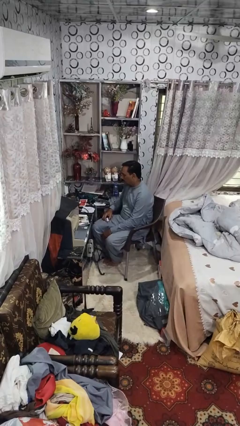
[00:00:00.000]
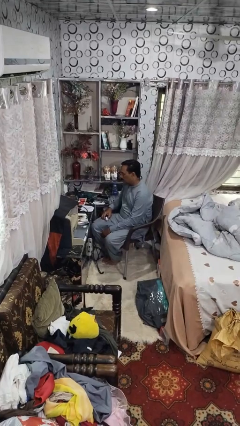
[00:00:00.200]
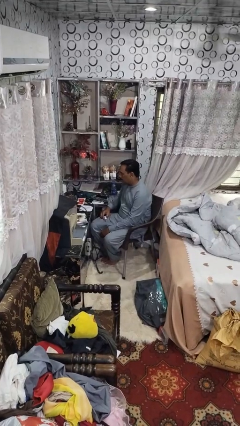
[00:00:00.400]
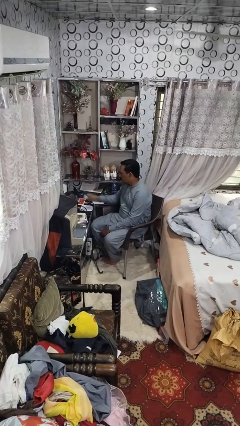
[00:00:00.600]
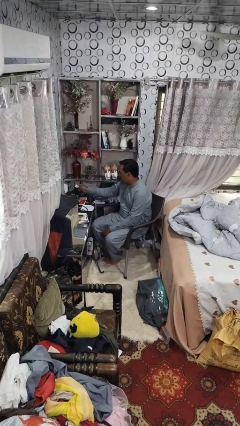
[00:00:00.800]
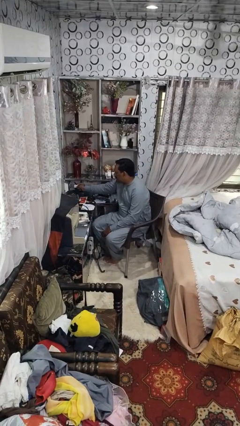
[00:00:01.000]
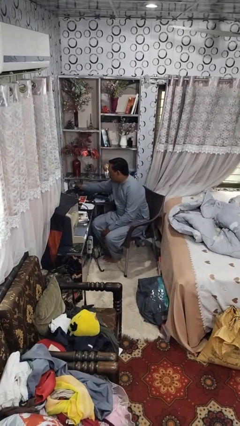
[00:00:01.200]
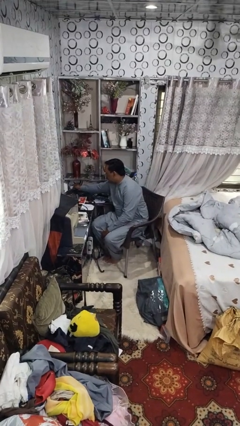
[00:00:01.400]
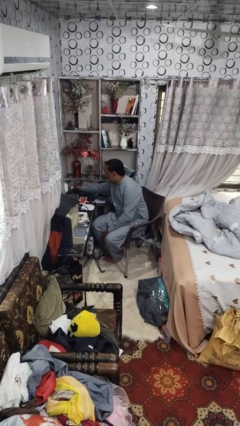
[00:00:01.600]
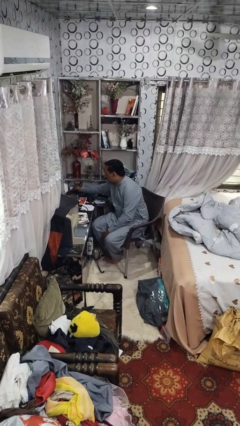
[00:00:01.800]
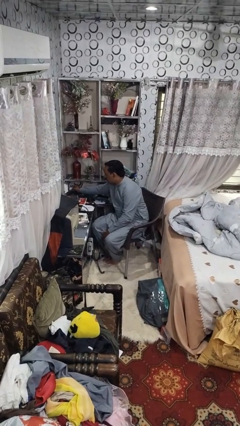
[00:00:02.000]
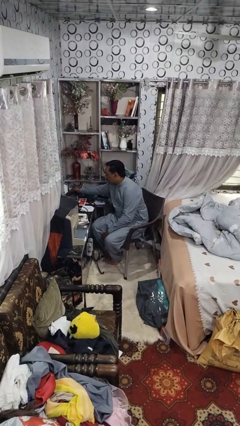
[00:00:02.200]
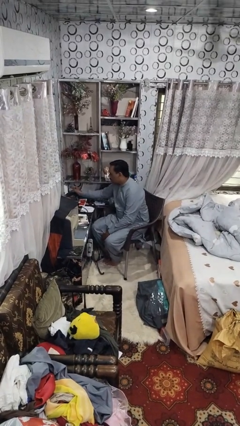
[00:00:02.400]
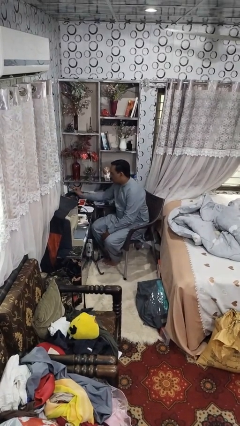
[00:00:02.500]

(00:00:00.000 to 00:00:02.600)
person plugs into electrical socket

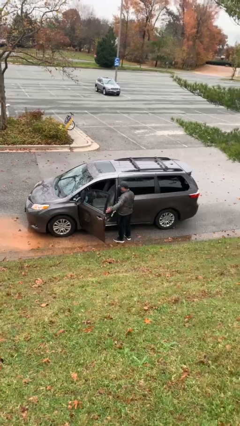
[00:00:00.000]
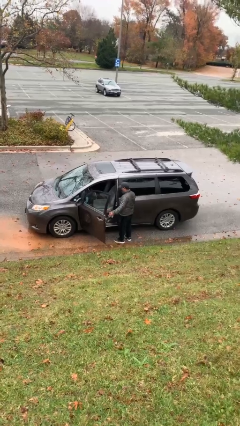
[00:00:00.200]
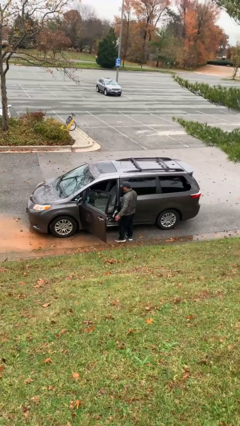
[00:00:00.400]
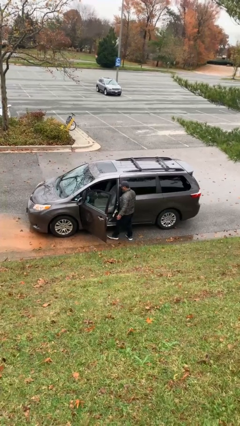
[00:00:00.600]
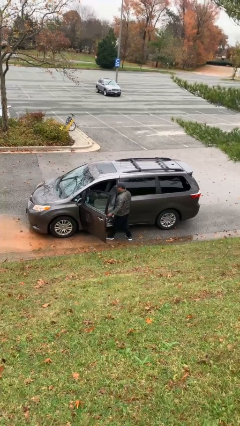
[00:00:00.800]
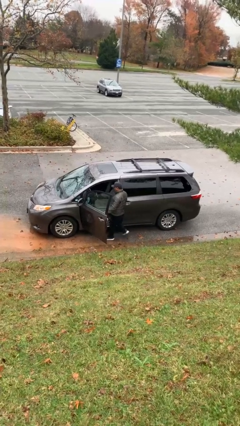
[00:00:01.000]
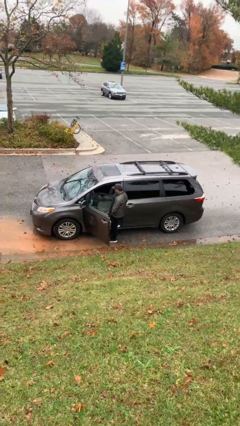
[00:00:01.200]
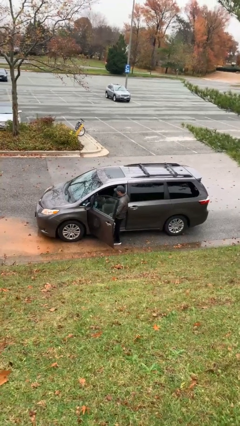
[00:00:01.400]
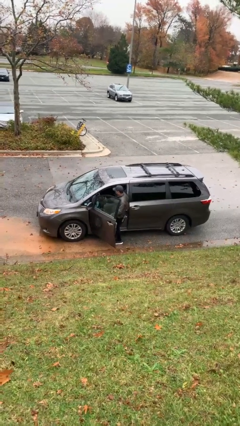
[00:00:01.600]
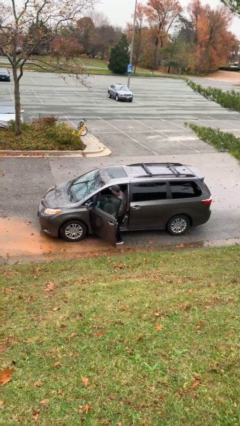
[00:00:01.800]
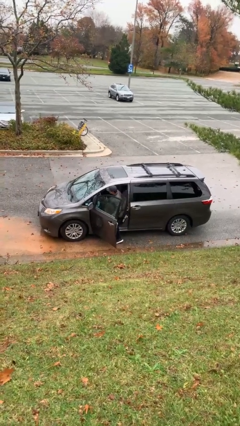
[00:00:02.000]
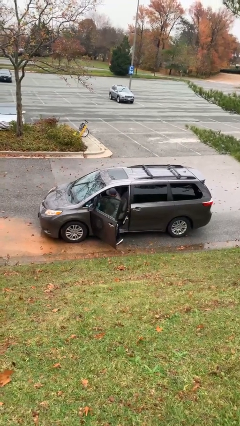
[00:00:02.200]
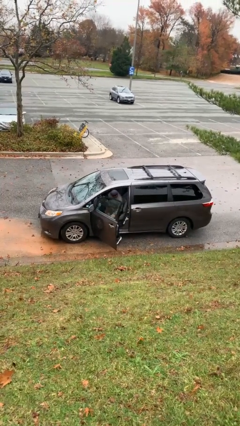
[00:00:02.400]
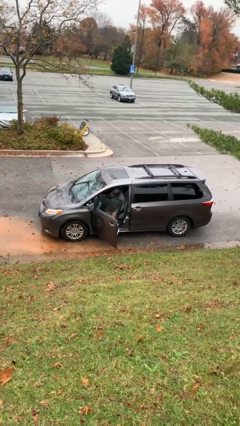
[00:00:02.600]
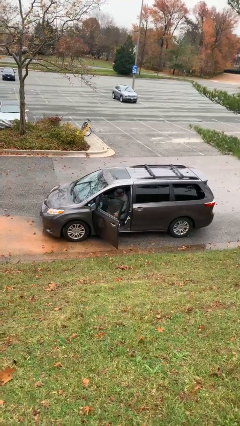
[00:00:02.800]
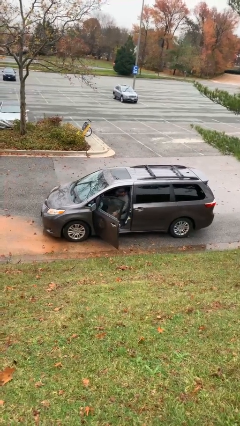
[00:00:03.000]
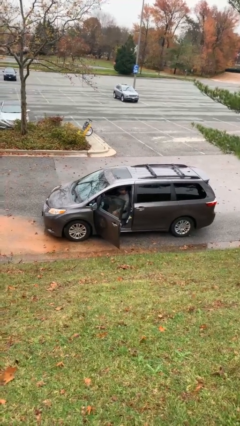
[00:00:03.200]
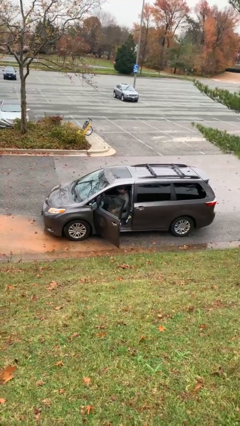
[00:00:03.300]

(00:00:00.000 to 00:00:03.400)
person enters car

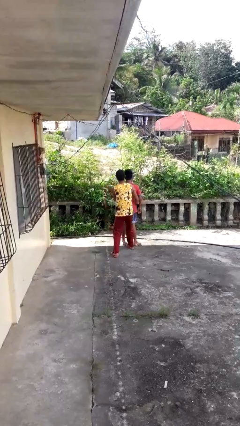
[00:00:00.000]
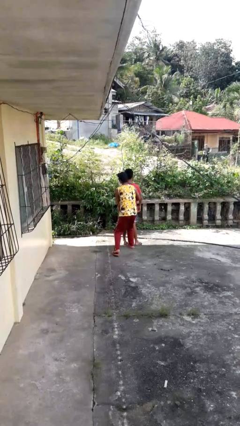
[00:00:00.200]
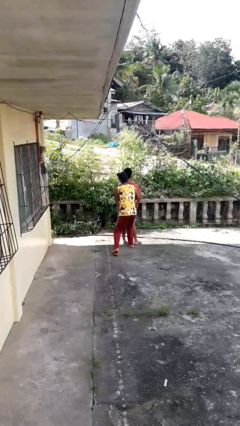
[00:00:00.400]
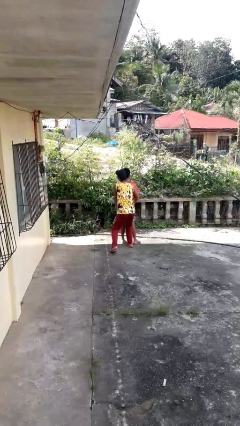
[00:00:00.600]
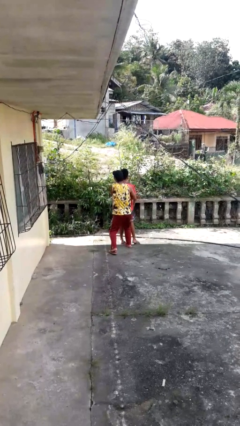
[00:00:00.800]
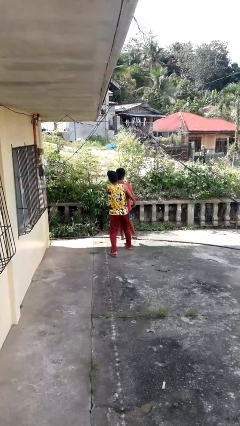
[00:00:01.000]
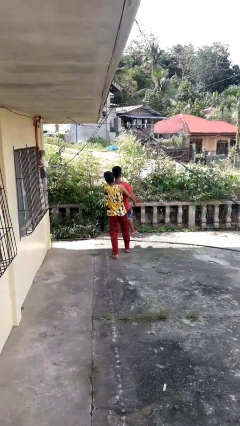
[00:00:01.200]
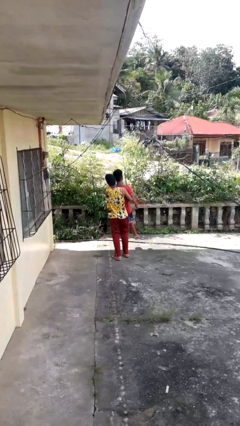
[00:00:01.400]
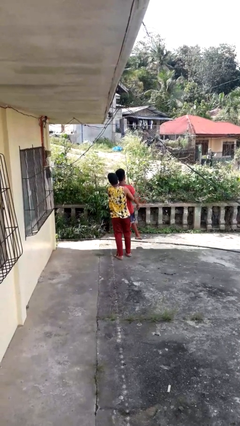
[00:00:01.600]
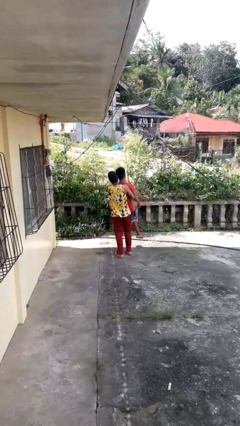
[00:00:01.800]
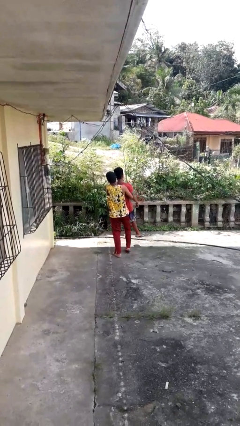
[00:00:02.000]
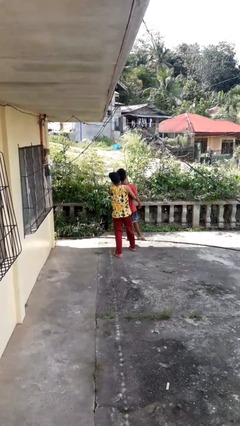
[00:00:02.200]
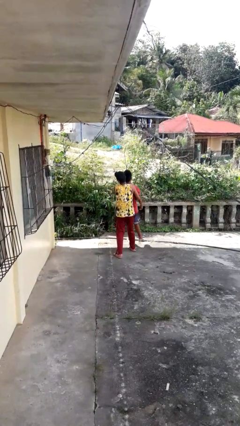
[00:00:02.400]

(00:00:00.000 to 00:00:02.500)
person picks up person

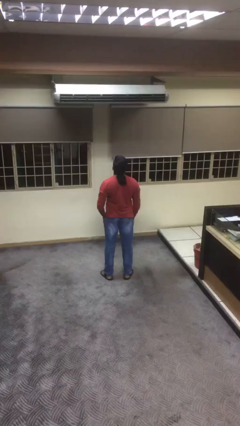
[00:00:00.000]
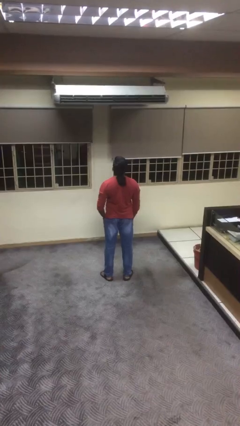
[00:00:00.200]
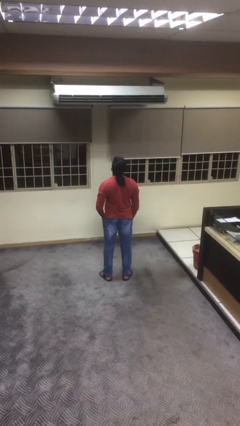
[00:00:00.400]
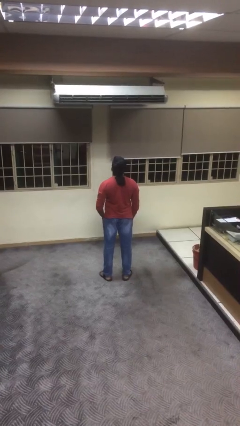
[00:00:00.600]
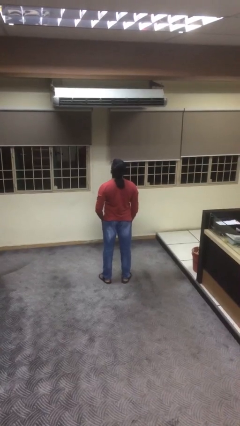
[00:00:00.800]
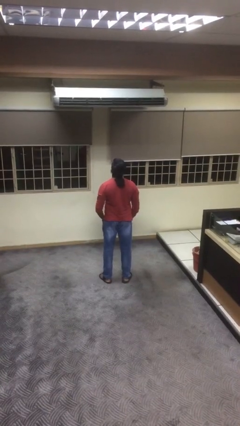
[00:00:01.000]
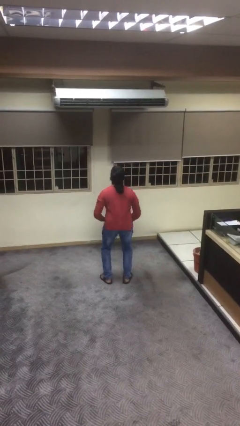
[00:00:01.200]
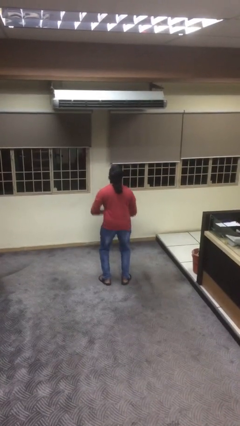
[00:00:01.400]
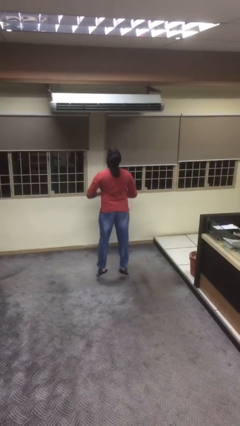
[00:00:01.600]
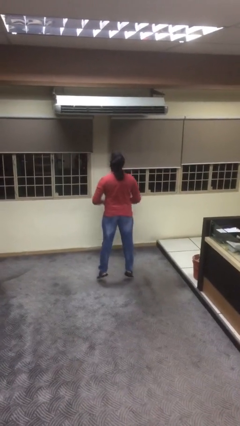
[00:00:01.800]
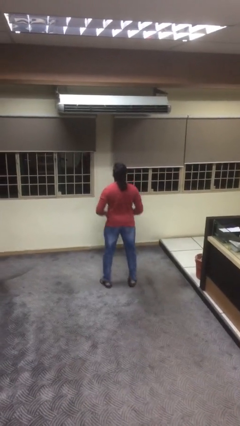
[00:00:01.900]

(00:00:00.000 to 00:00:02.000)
person jumps

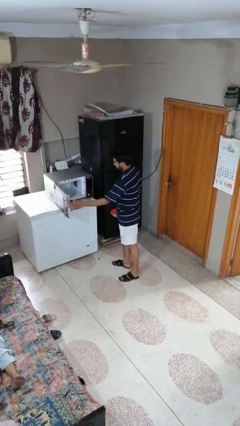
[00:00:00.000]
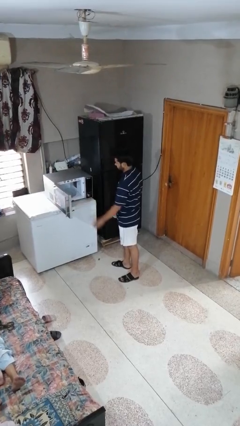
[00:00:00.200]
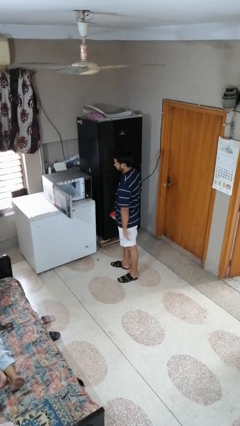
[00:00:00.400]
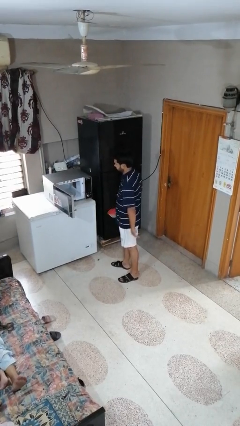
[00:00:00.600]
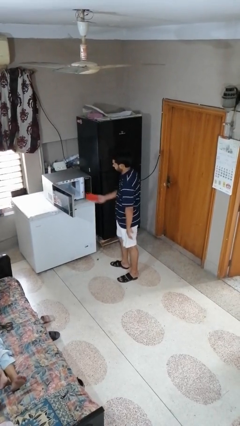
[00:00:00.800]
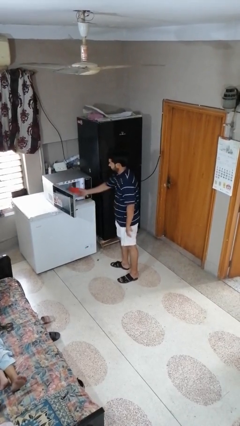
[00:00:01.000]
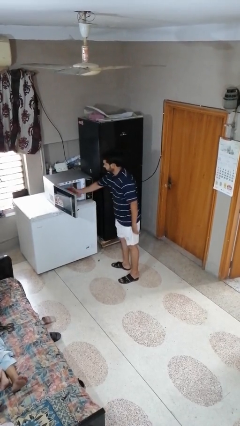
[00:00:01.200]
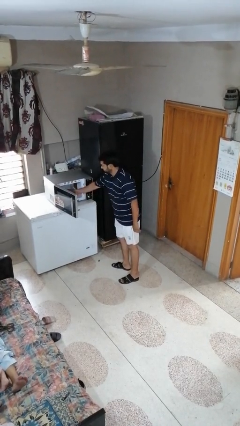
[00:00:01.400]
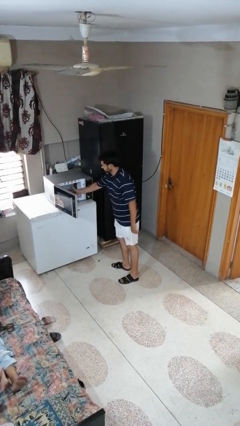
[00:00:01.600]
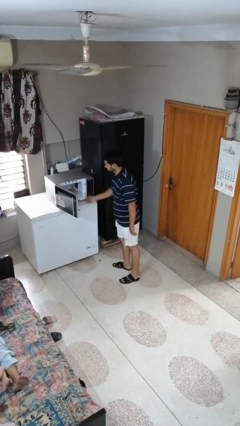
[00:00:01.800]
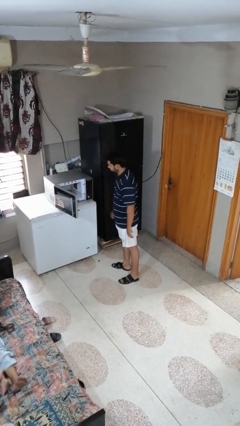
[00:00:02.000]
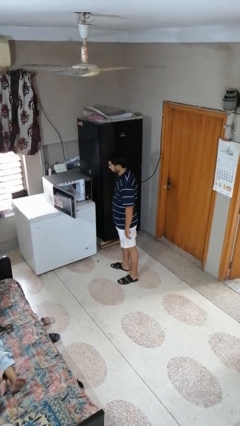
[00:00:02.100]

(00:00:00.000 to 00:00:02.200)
person puts object into microwave

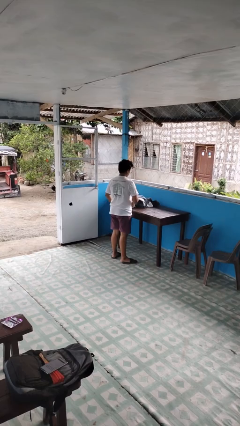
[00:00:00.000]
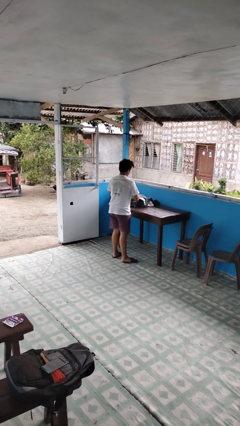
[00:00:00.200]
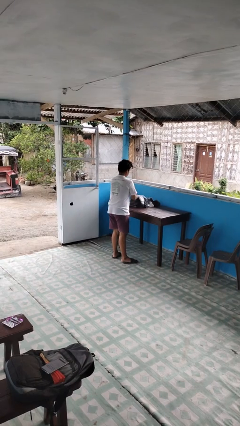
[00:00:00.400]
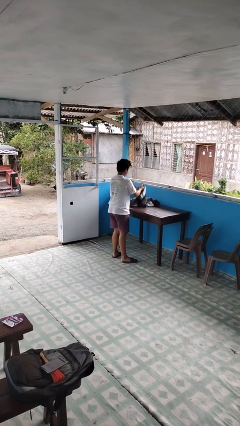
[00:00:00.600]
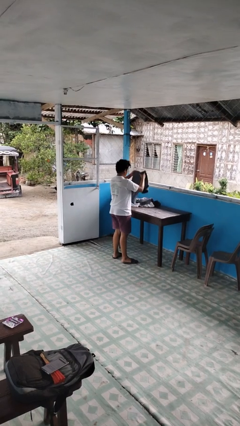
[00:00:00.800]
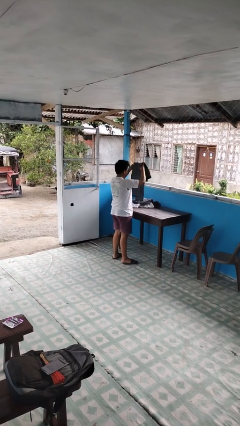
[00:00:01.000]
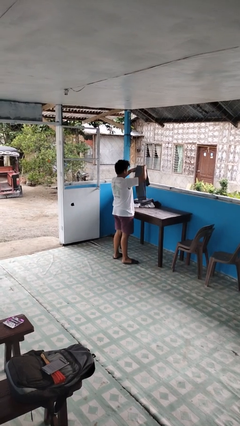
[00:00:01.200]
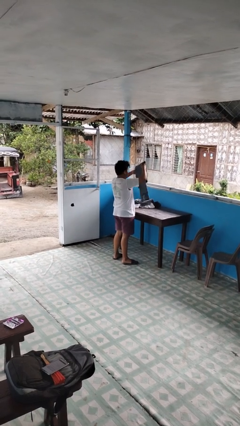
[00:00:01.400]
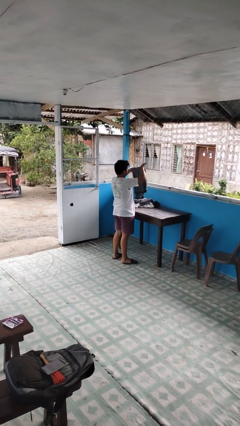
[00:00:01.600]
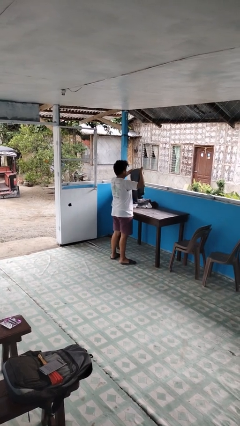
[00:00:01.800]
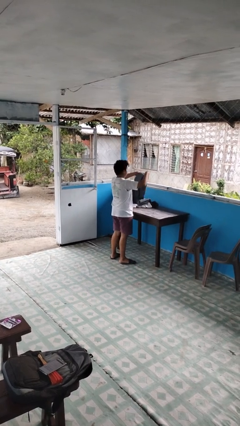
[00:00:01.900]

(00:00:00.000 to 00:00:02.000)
person folds pants

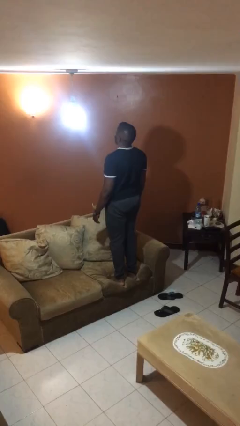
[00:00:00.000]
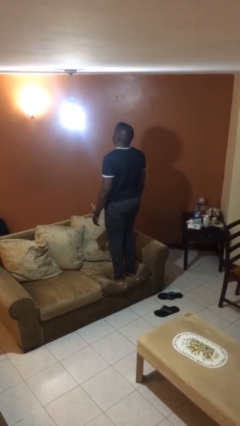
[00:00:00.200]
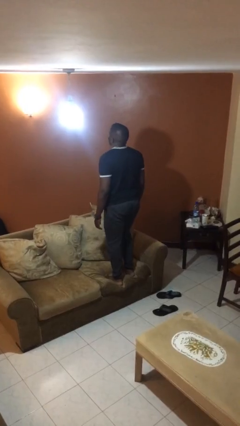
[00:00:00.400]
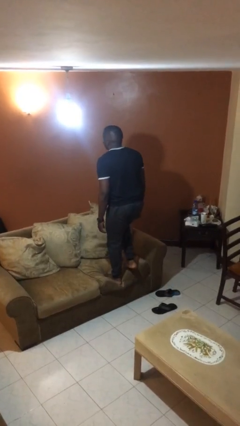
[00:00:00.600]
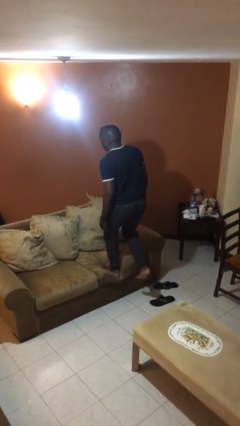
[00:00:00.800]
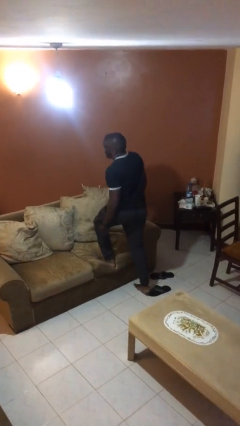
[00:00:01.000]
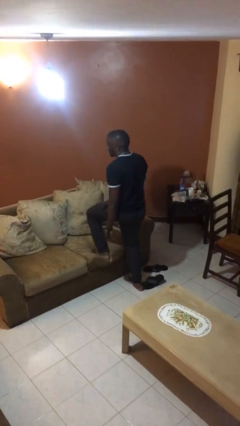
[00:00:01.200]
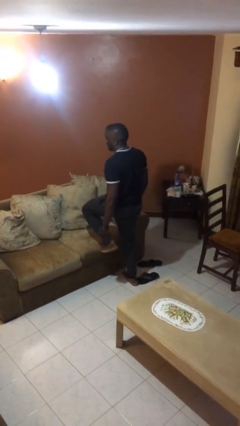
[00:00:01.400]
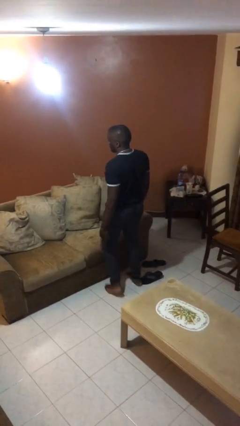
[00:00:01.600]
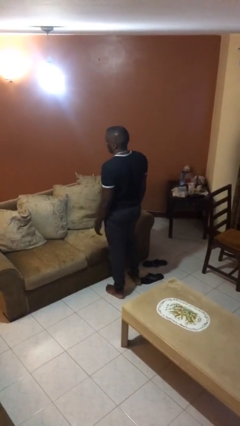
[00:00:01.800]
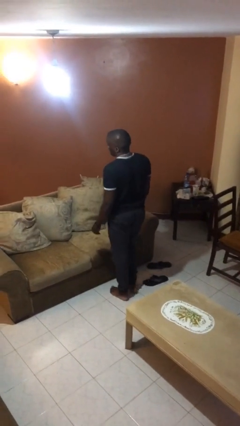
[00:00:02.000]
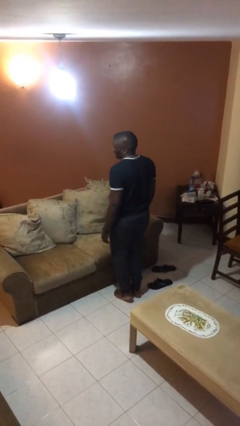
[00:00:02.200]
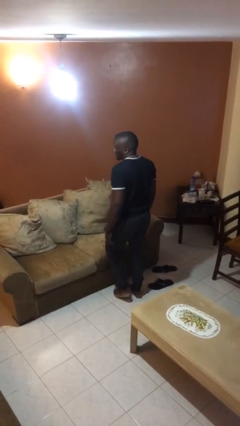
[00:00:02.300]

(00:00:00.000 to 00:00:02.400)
person climbs off couch
